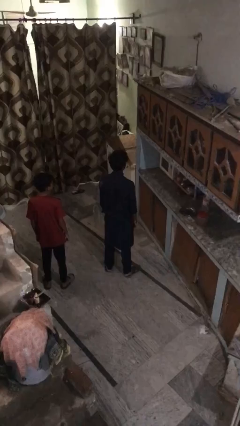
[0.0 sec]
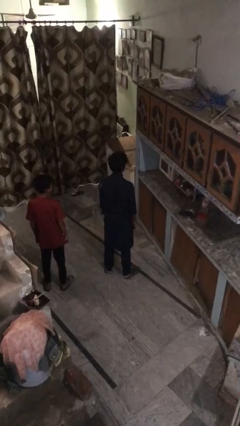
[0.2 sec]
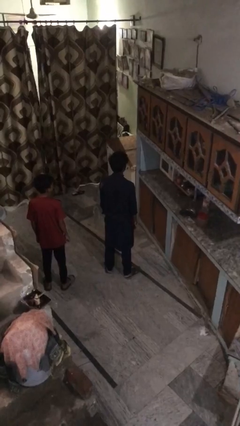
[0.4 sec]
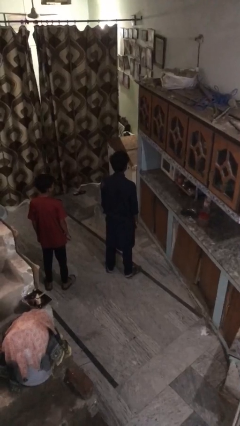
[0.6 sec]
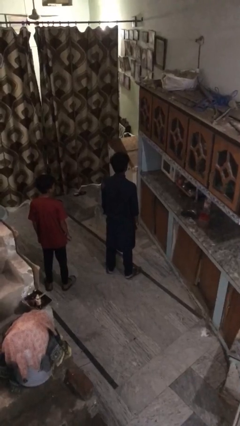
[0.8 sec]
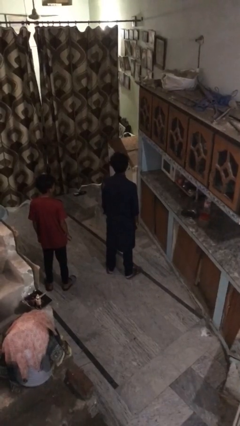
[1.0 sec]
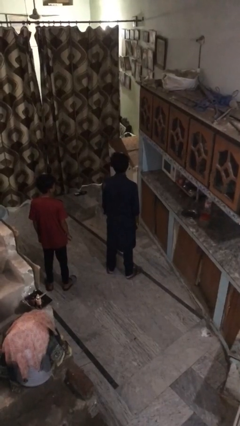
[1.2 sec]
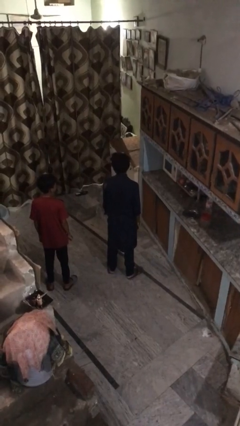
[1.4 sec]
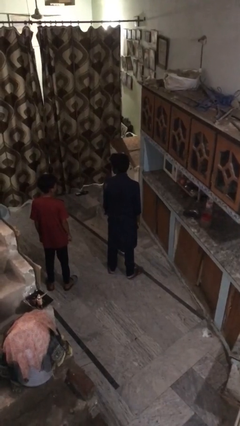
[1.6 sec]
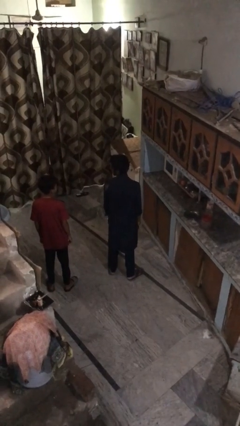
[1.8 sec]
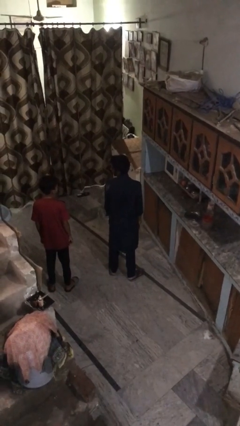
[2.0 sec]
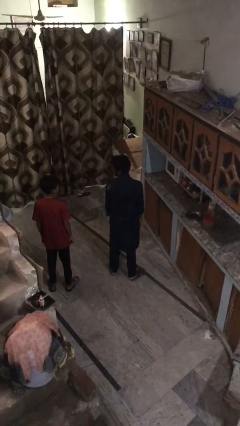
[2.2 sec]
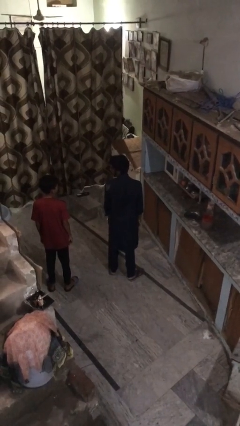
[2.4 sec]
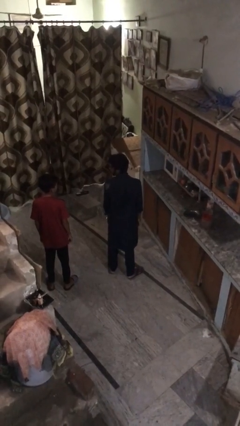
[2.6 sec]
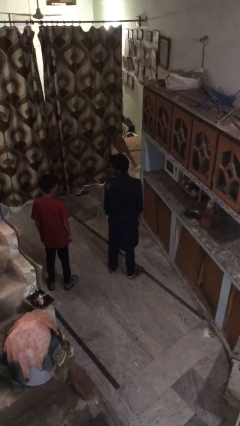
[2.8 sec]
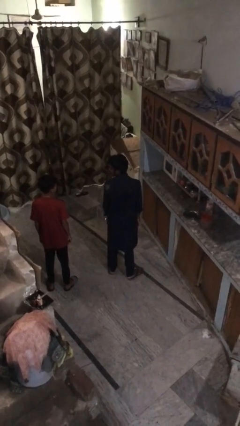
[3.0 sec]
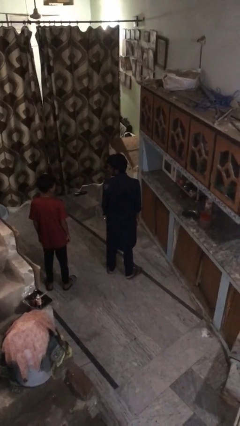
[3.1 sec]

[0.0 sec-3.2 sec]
person looks over shoulder

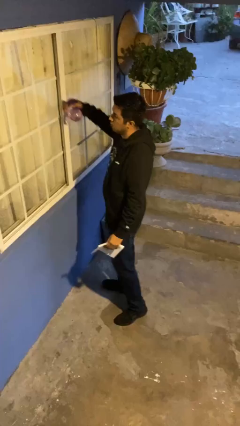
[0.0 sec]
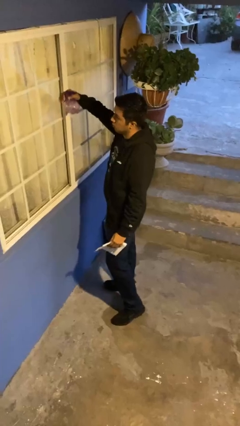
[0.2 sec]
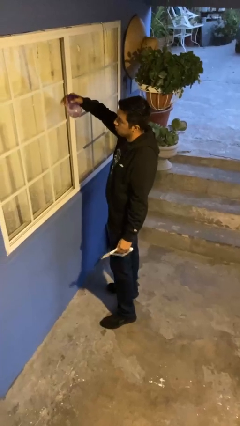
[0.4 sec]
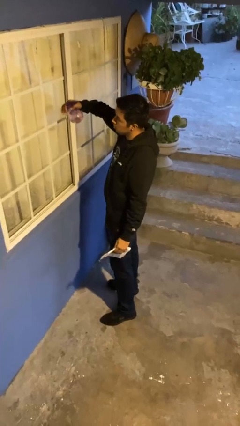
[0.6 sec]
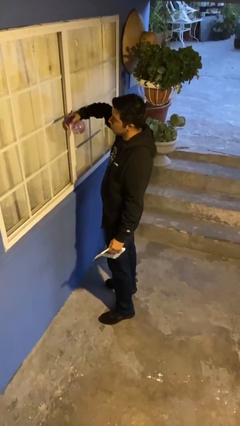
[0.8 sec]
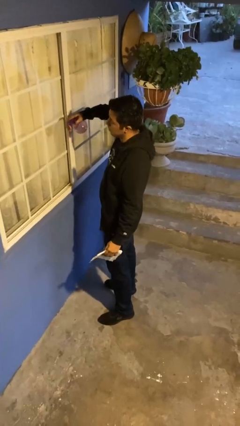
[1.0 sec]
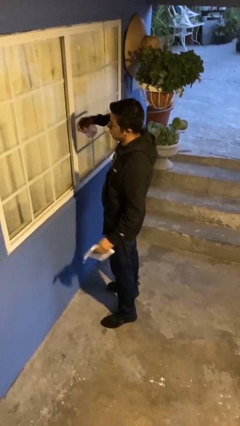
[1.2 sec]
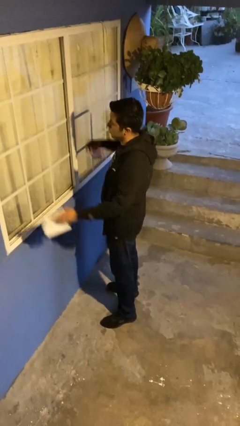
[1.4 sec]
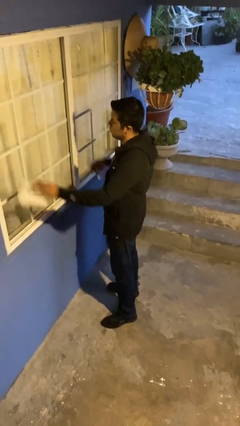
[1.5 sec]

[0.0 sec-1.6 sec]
person sprays from bottle

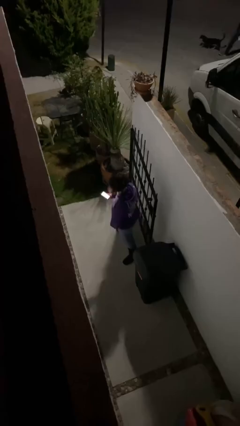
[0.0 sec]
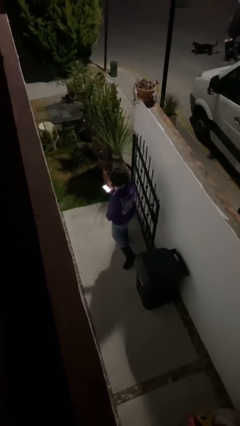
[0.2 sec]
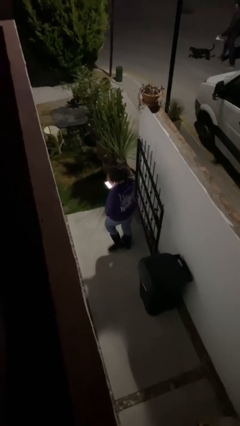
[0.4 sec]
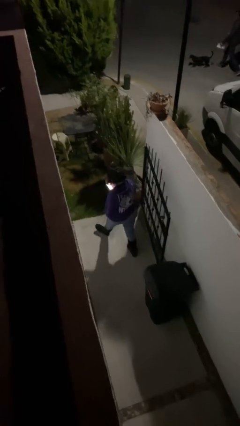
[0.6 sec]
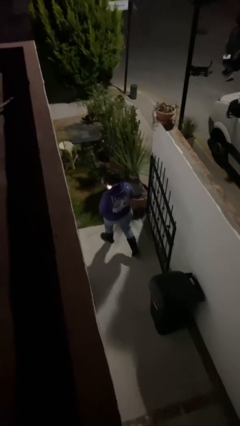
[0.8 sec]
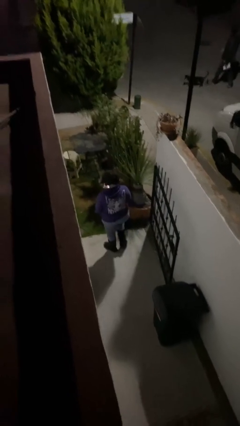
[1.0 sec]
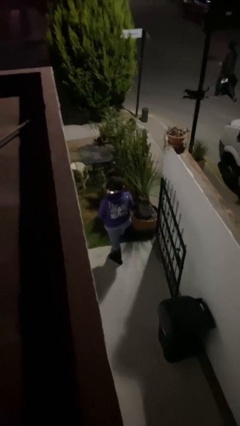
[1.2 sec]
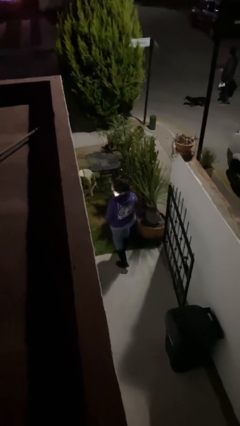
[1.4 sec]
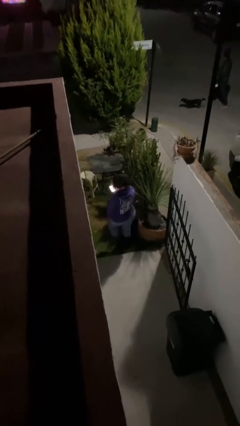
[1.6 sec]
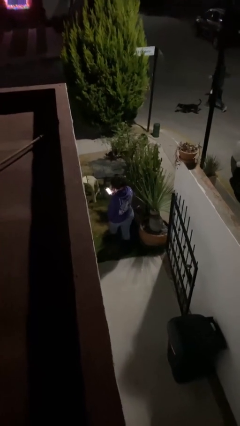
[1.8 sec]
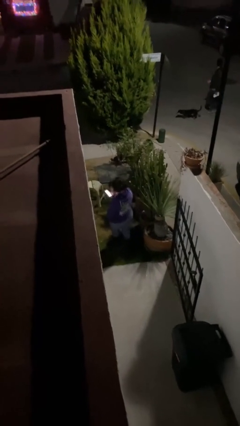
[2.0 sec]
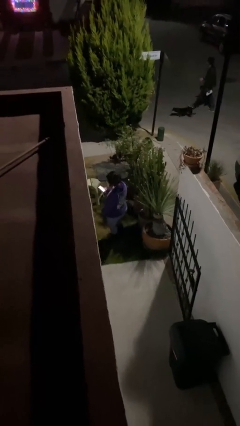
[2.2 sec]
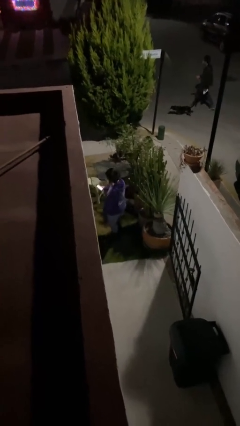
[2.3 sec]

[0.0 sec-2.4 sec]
person exits scene through structure

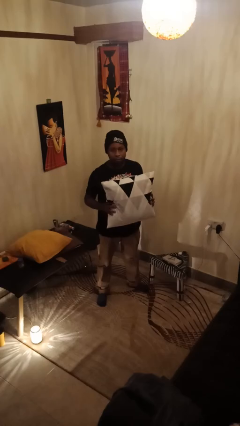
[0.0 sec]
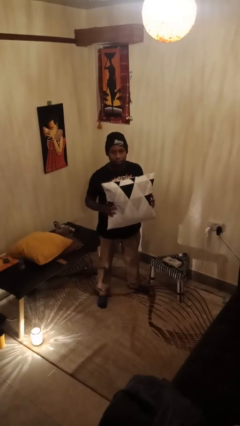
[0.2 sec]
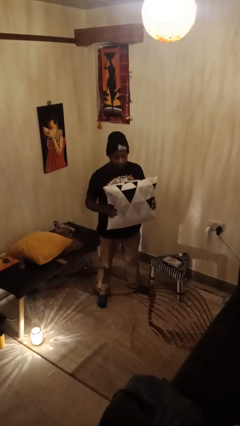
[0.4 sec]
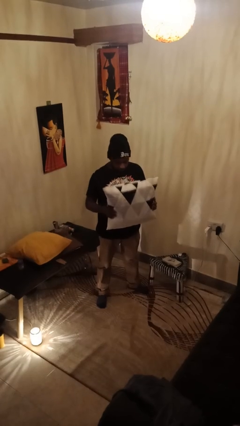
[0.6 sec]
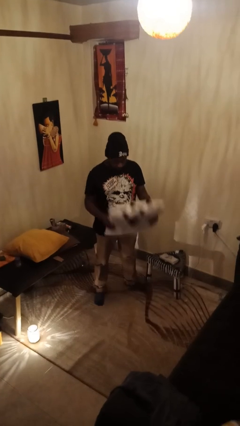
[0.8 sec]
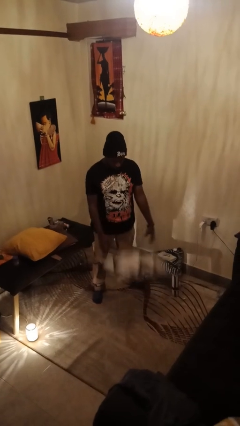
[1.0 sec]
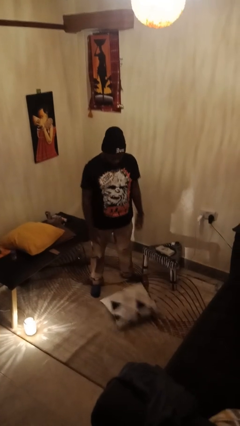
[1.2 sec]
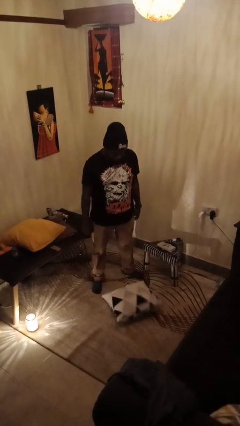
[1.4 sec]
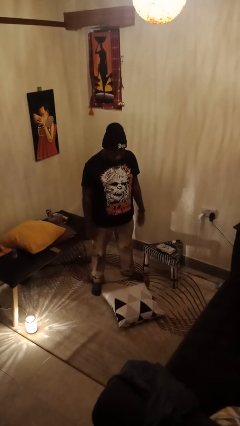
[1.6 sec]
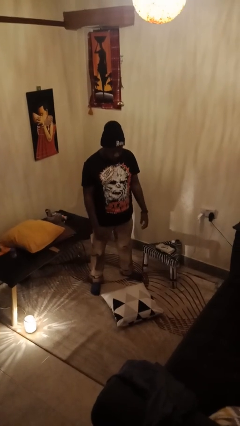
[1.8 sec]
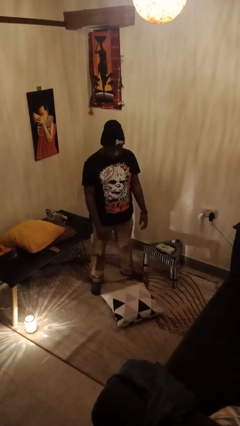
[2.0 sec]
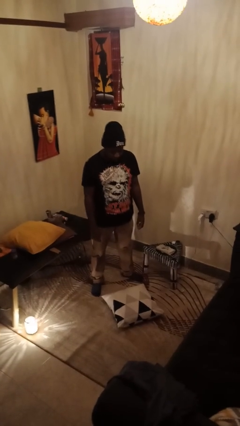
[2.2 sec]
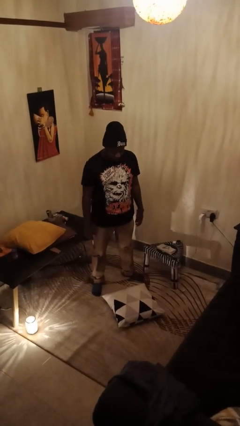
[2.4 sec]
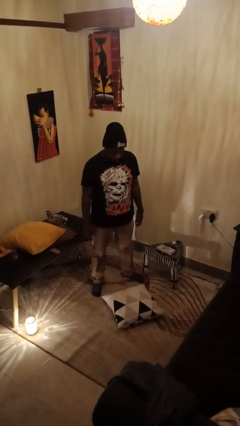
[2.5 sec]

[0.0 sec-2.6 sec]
person drops object

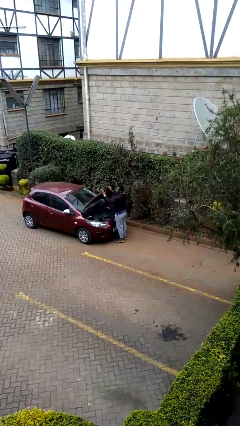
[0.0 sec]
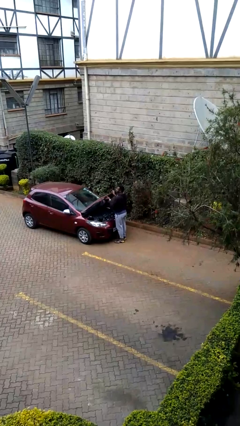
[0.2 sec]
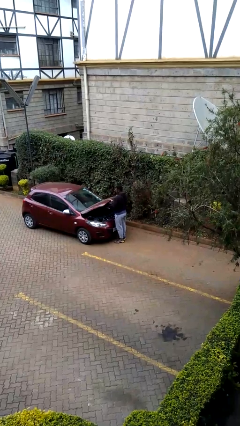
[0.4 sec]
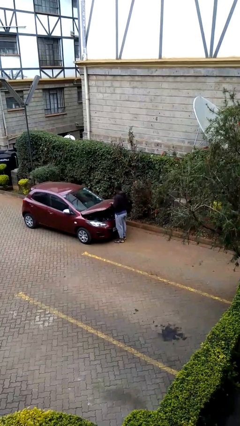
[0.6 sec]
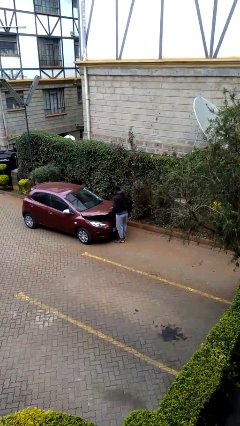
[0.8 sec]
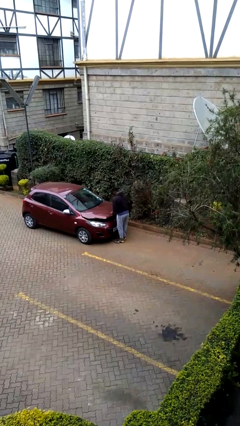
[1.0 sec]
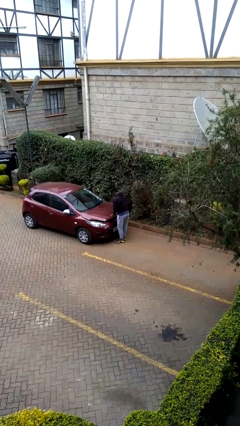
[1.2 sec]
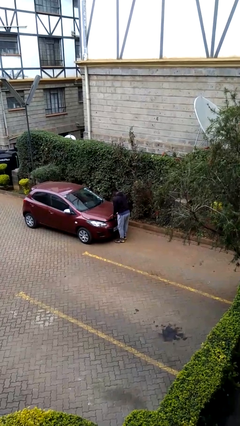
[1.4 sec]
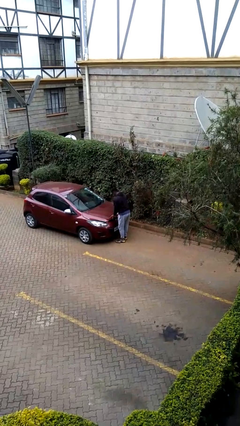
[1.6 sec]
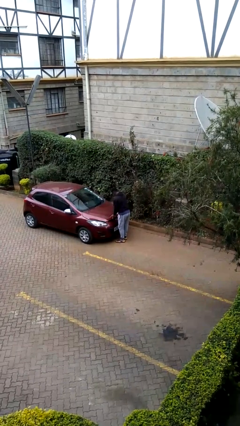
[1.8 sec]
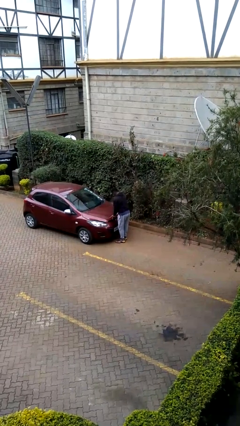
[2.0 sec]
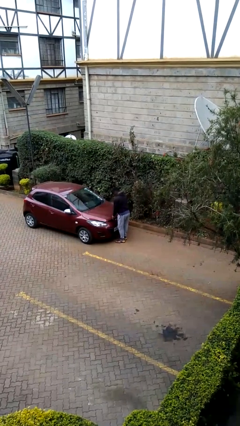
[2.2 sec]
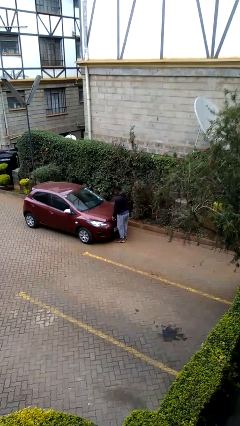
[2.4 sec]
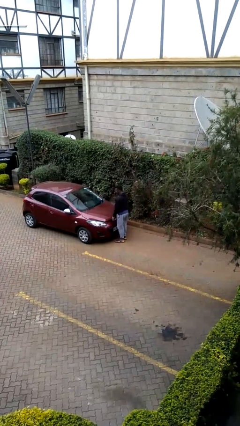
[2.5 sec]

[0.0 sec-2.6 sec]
person closes car hood

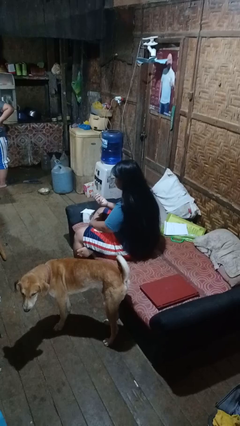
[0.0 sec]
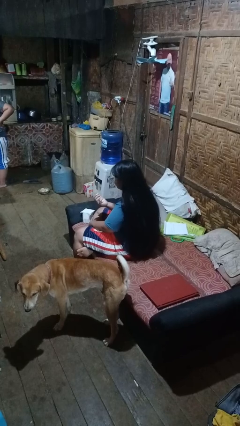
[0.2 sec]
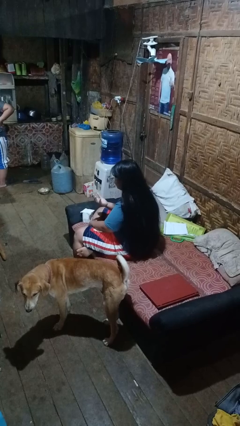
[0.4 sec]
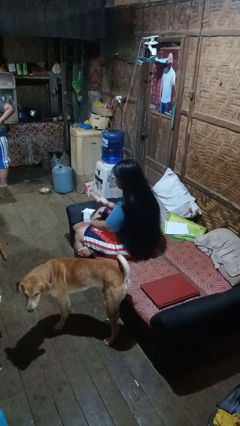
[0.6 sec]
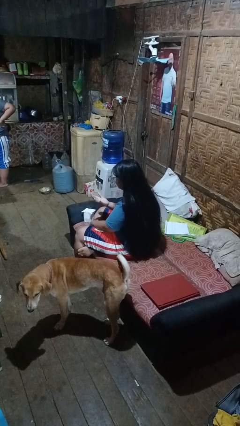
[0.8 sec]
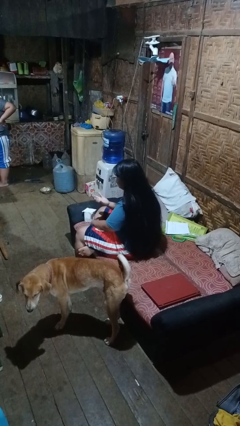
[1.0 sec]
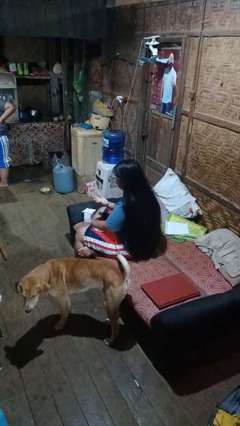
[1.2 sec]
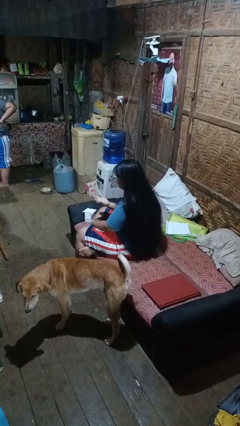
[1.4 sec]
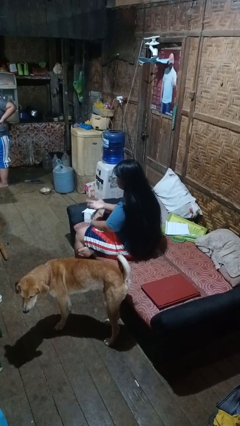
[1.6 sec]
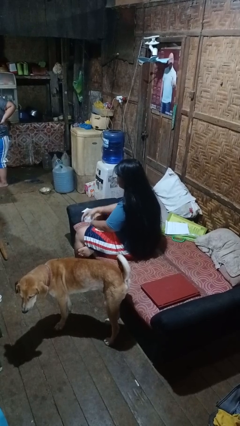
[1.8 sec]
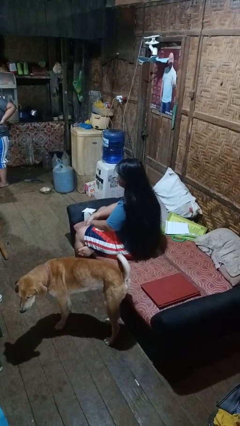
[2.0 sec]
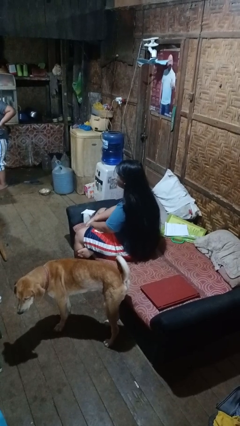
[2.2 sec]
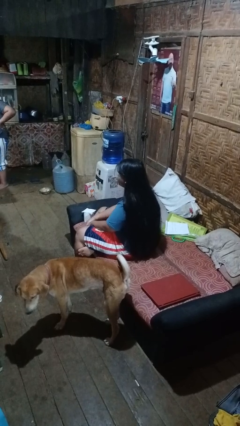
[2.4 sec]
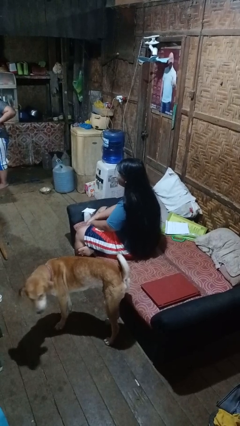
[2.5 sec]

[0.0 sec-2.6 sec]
person looks at hands in lap

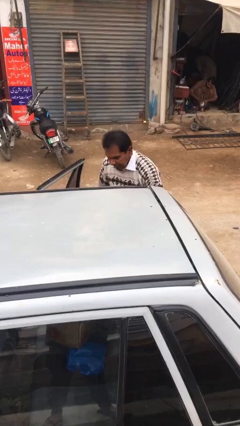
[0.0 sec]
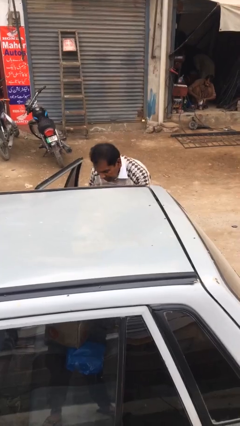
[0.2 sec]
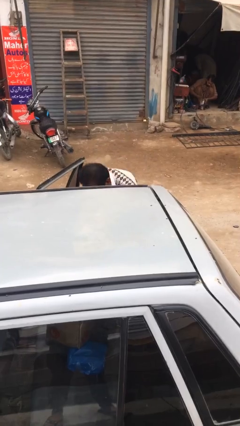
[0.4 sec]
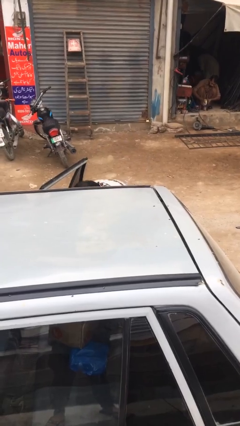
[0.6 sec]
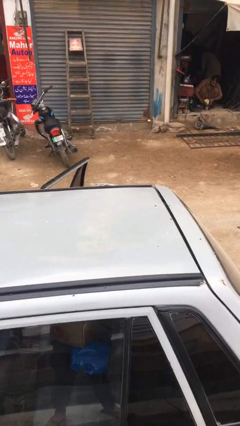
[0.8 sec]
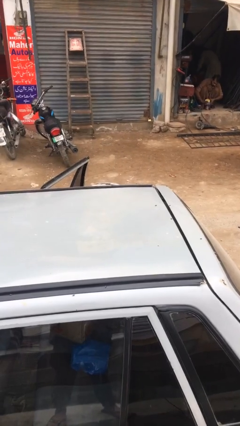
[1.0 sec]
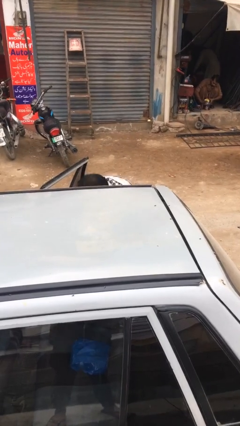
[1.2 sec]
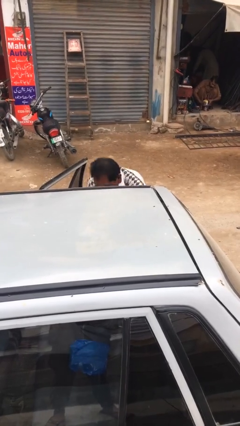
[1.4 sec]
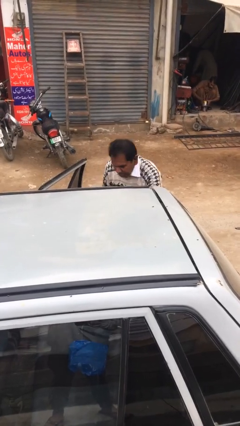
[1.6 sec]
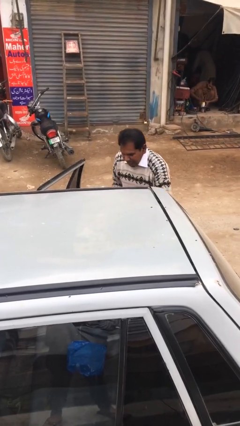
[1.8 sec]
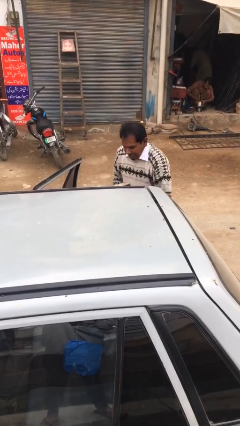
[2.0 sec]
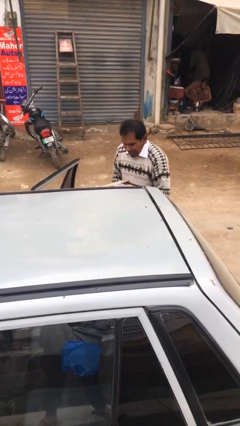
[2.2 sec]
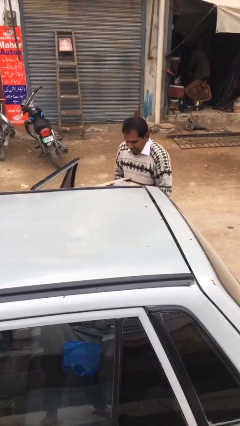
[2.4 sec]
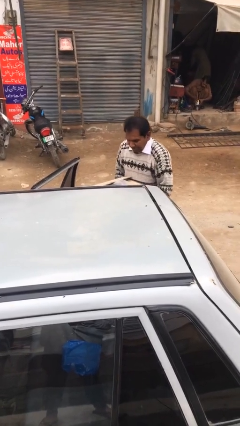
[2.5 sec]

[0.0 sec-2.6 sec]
person unloads car
